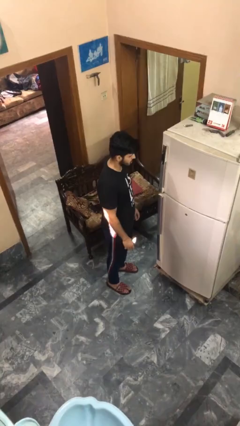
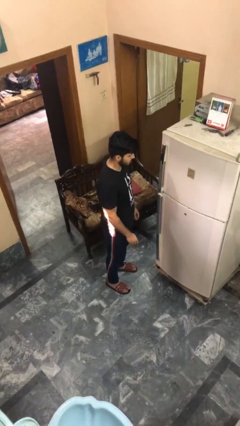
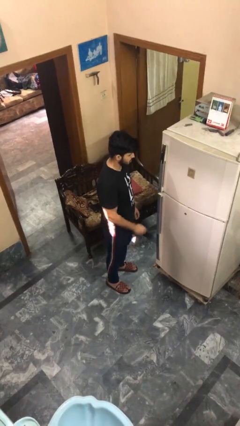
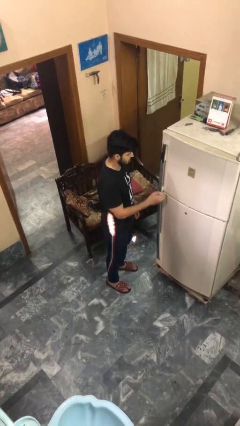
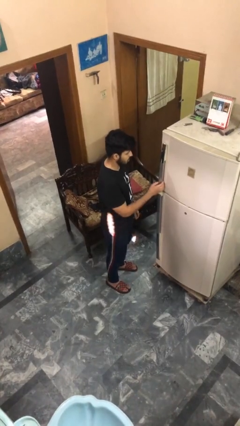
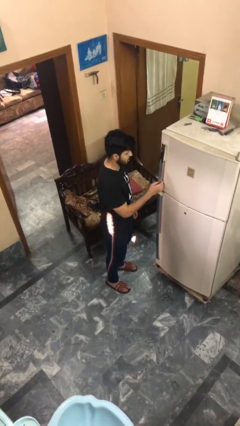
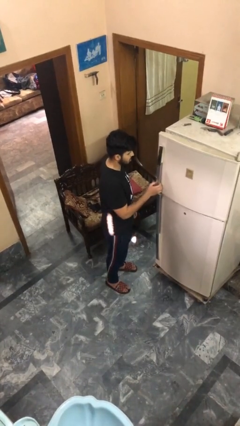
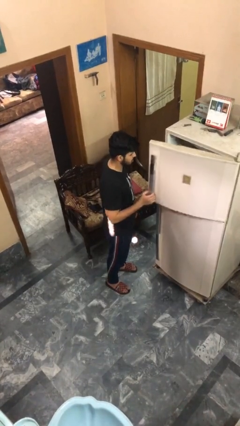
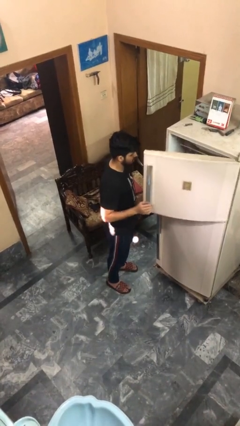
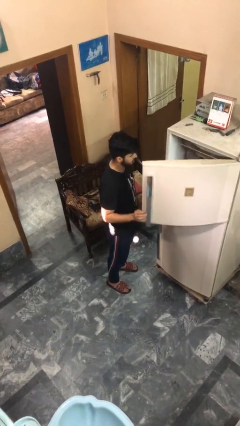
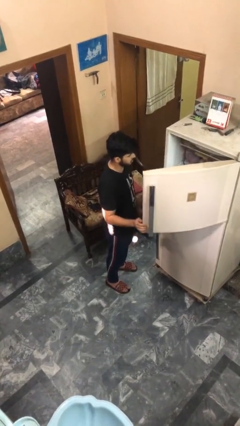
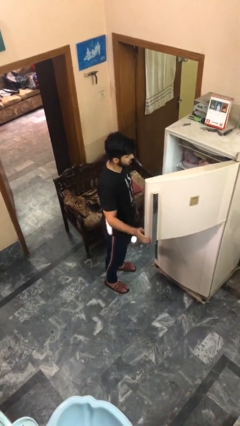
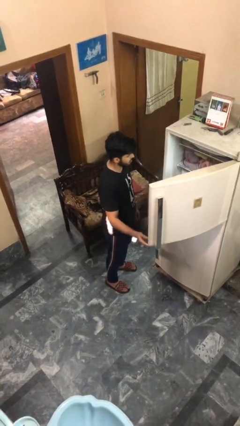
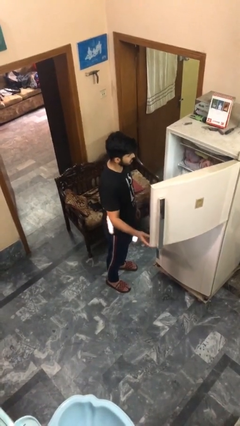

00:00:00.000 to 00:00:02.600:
person opens refrigerator

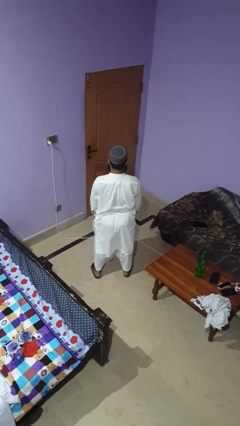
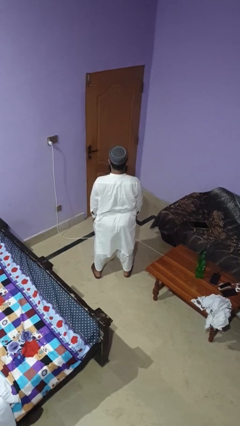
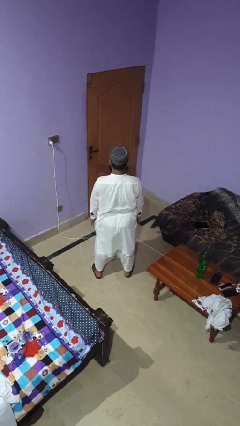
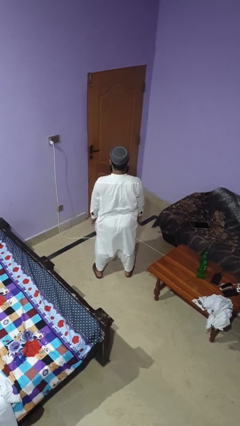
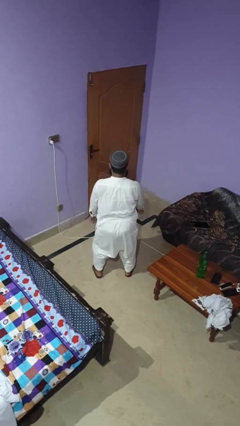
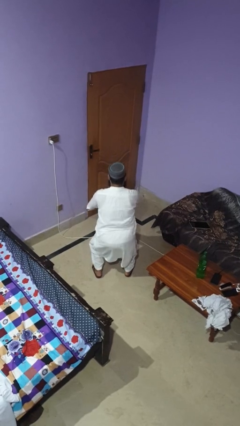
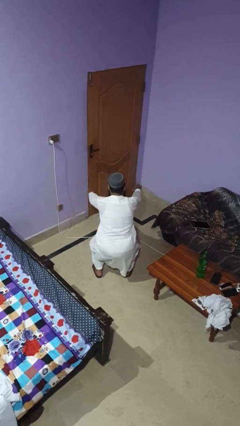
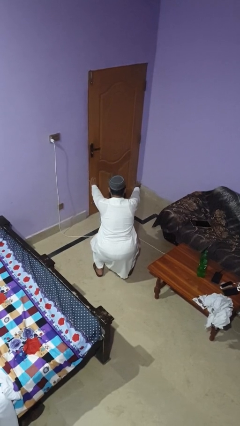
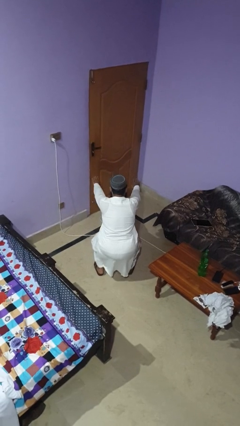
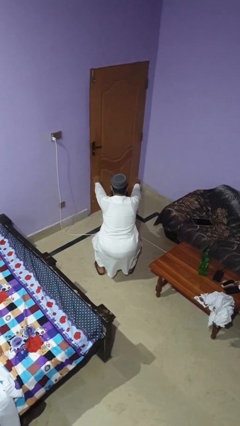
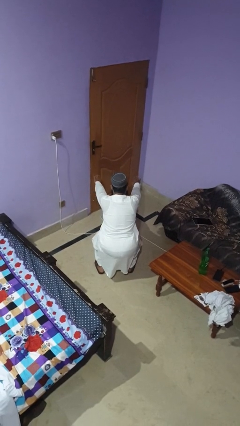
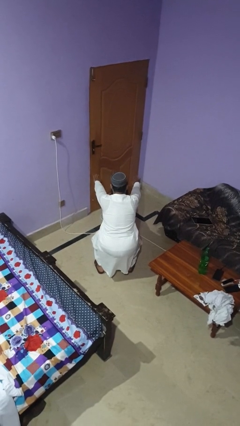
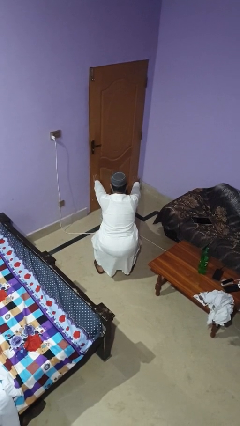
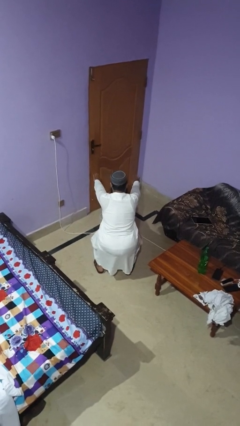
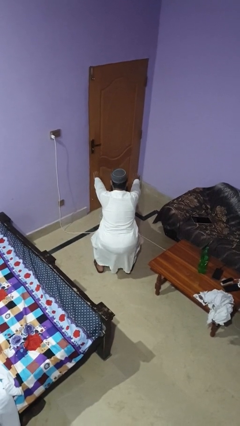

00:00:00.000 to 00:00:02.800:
person squats

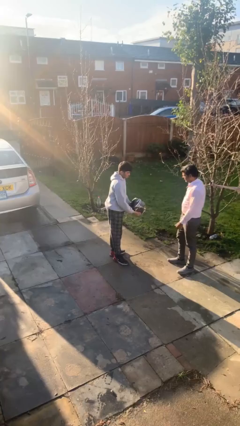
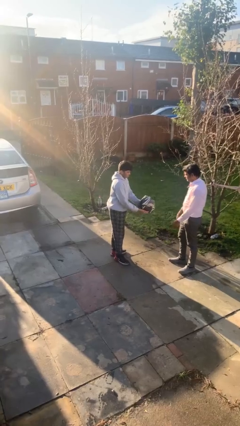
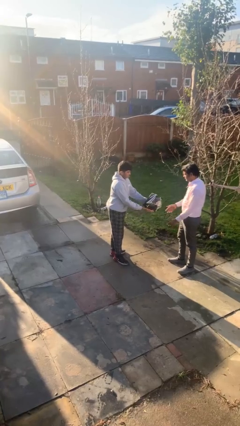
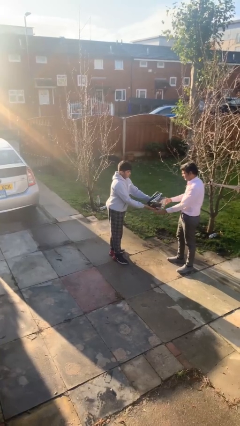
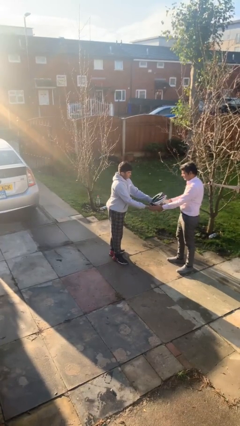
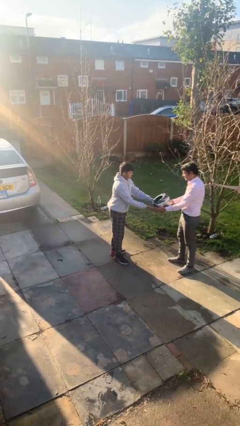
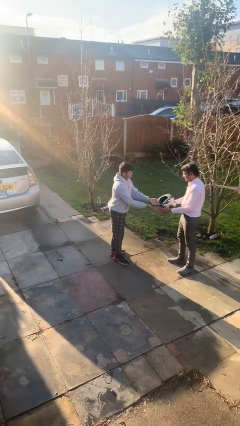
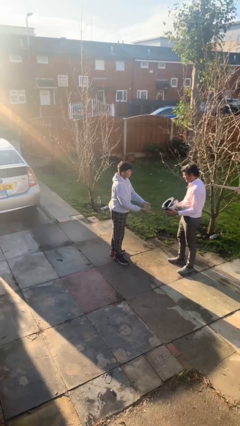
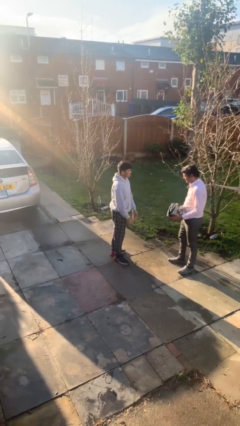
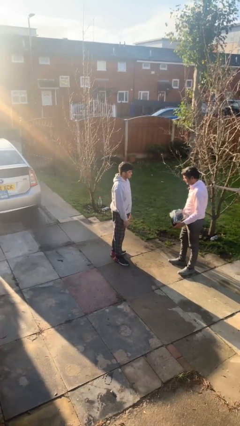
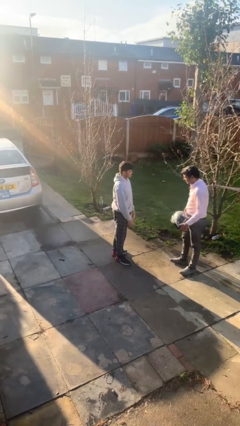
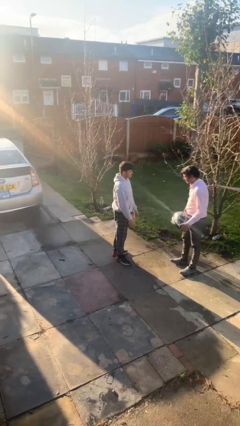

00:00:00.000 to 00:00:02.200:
person transfers object to person

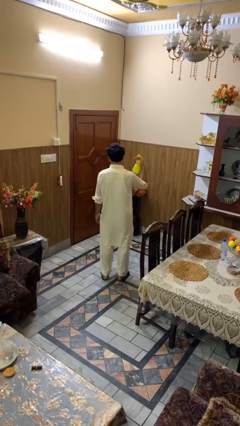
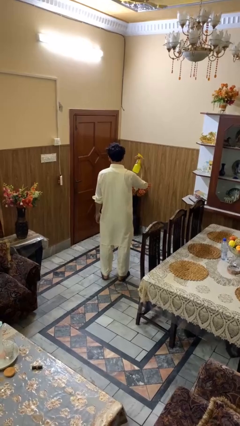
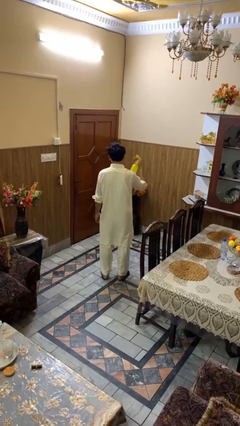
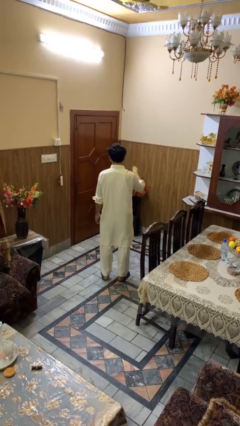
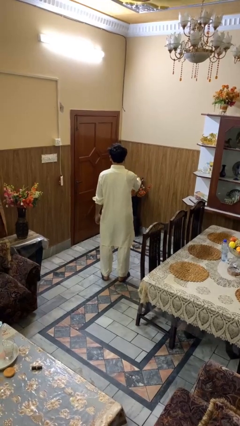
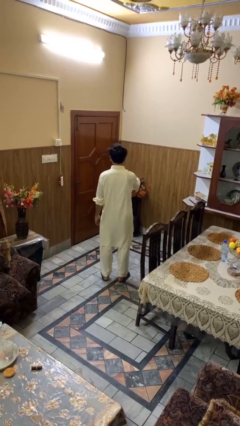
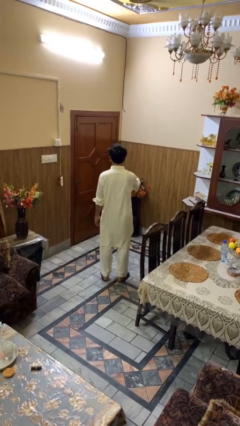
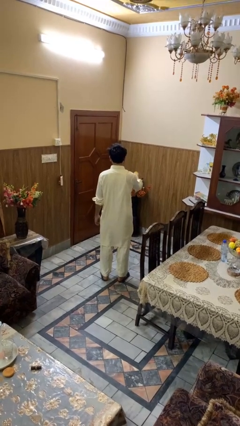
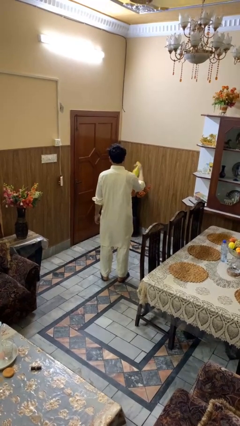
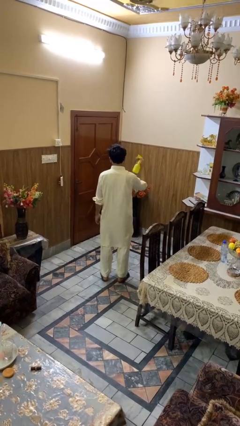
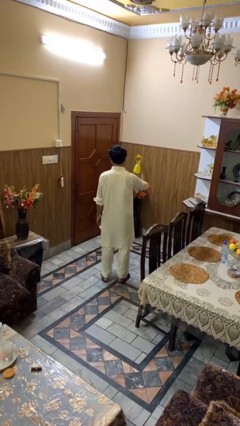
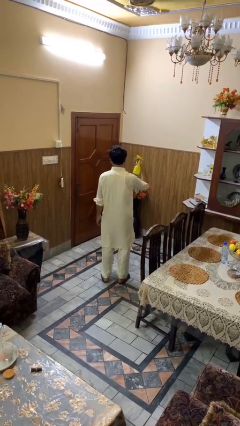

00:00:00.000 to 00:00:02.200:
person sprays from bottle

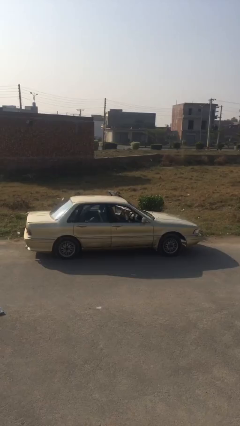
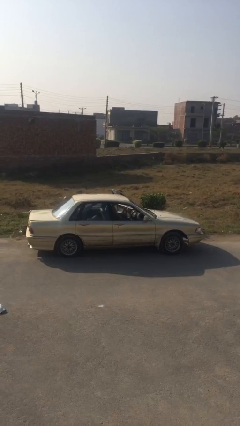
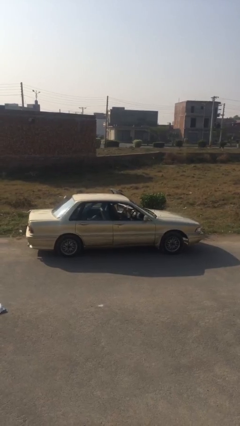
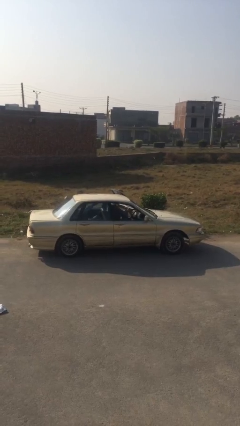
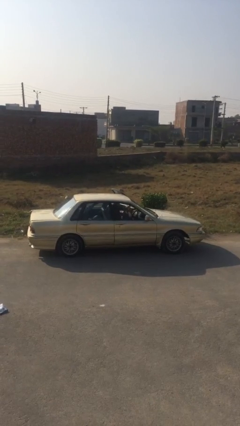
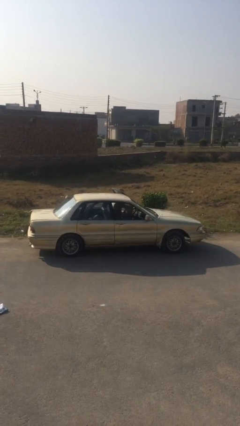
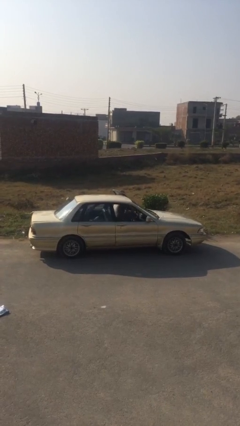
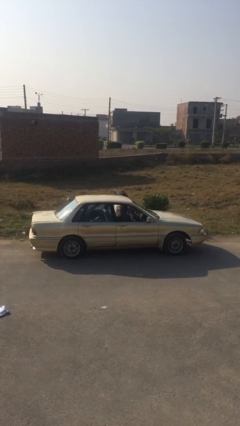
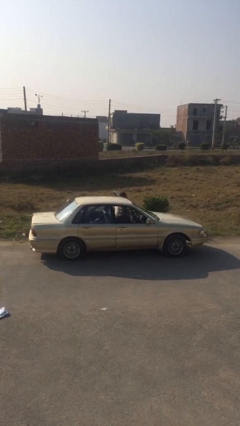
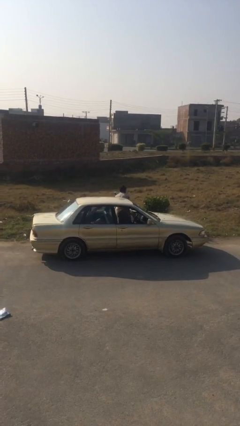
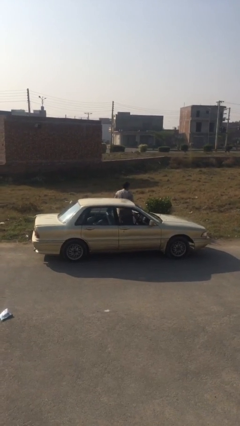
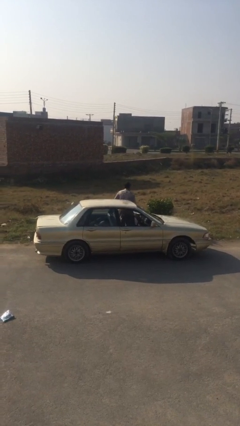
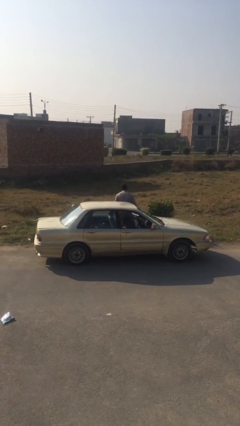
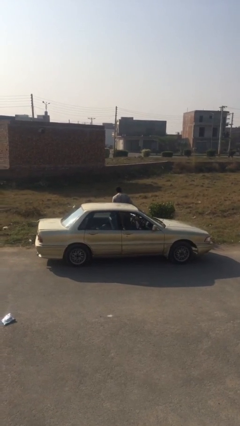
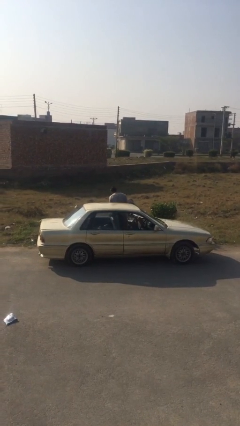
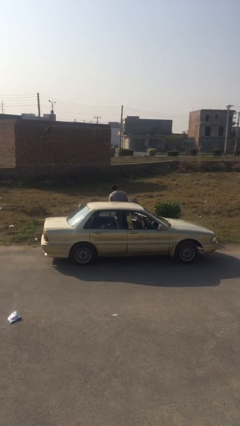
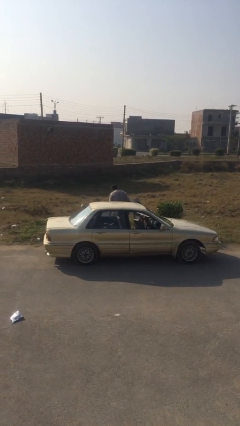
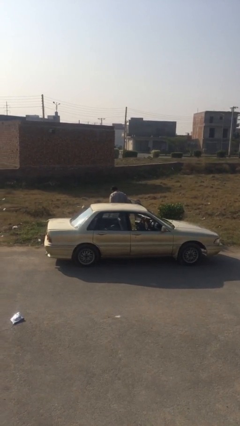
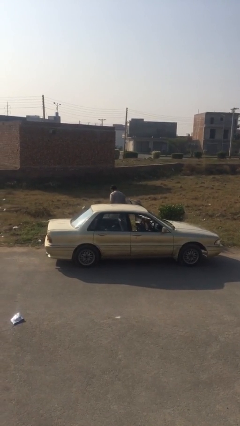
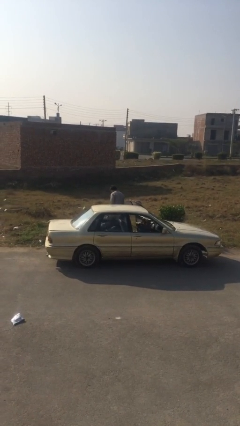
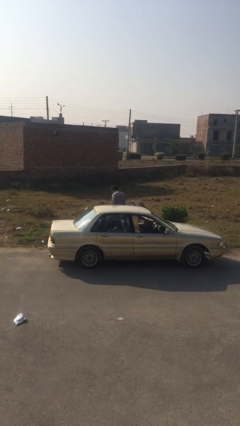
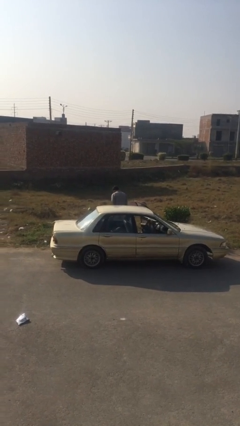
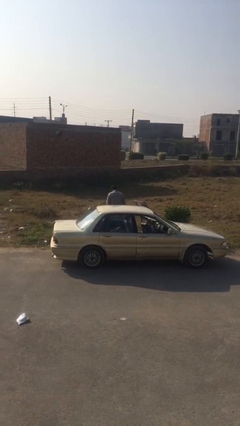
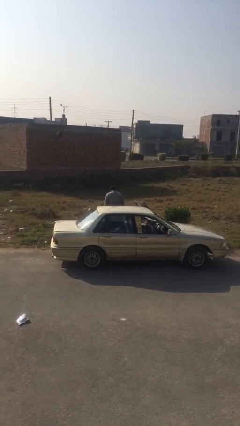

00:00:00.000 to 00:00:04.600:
person exits car

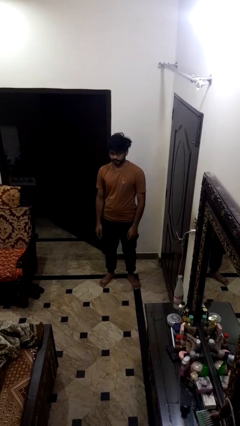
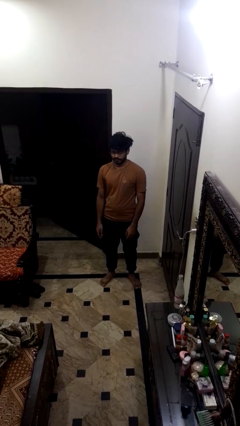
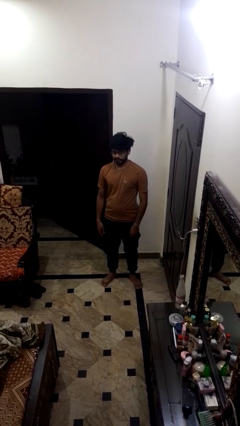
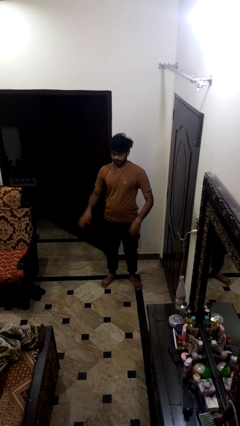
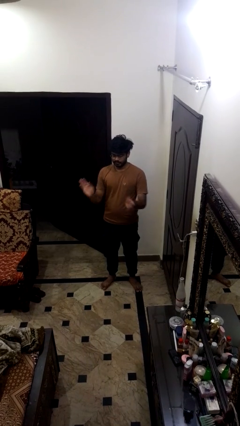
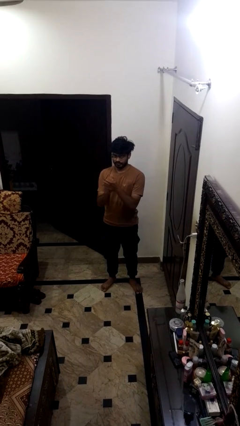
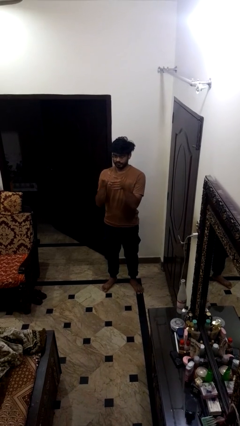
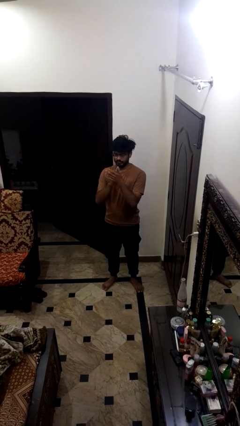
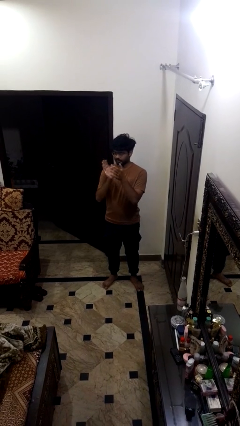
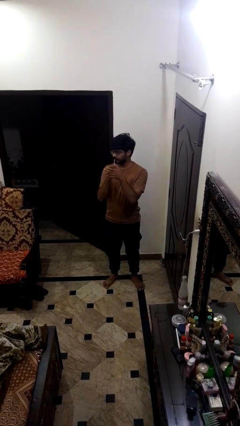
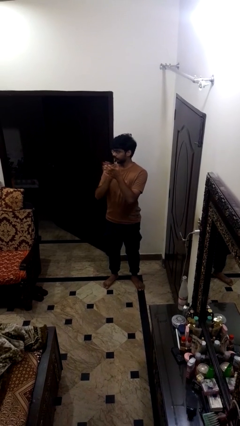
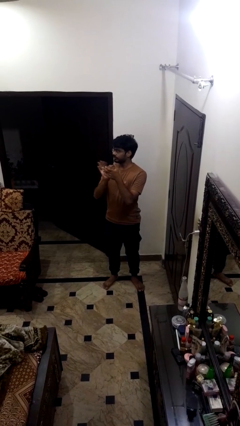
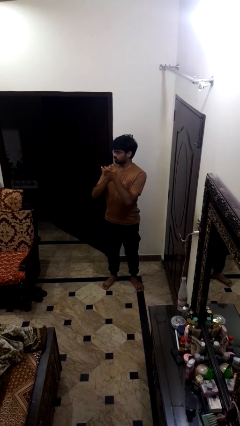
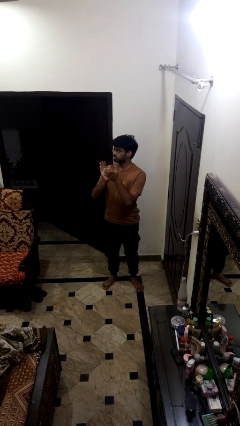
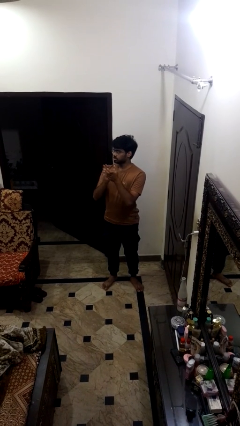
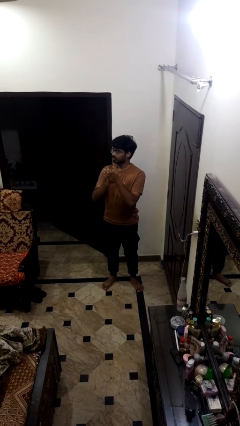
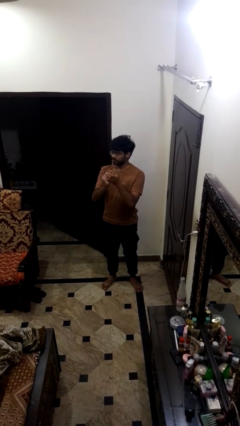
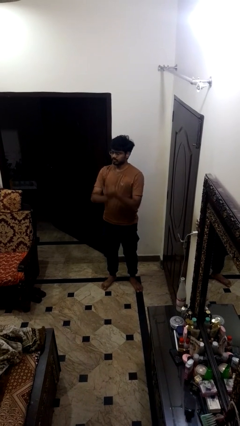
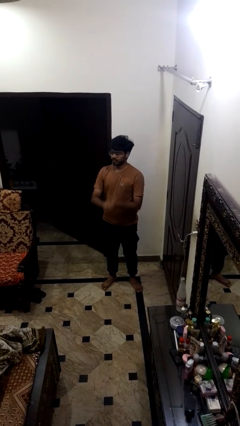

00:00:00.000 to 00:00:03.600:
person claps hands
